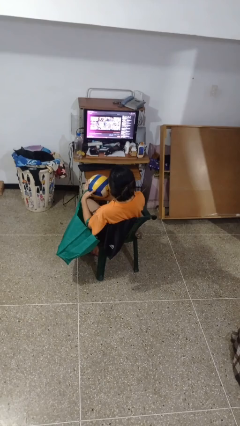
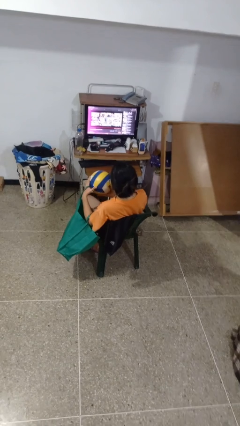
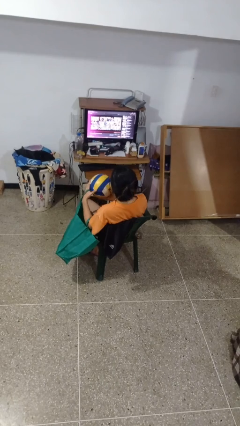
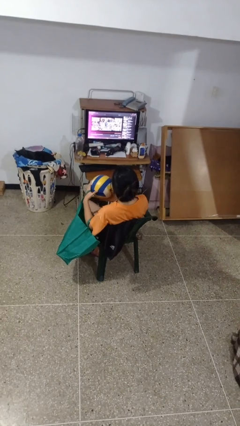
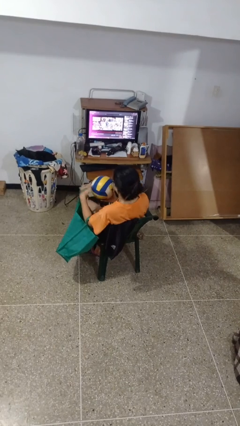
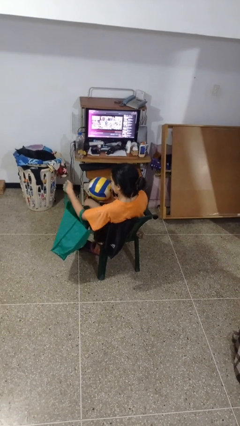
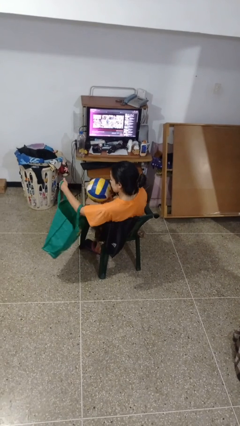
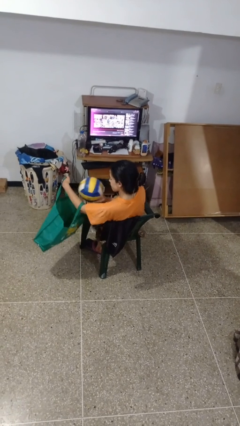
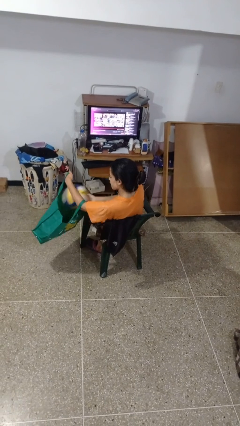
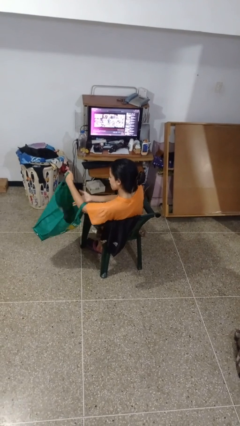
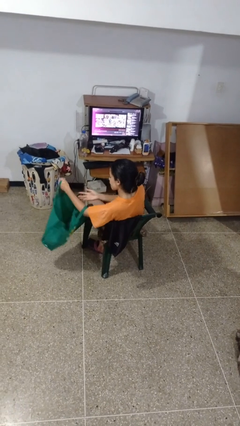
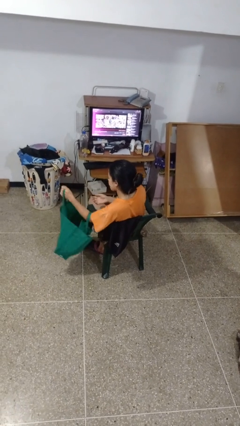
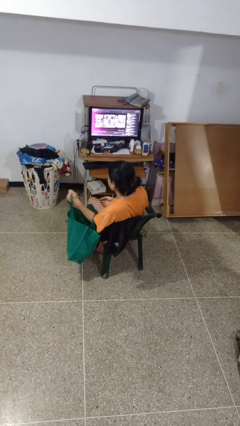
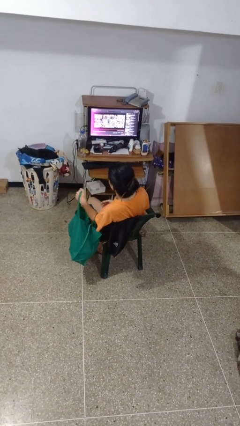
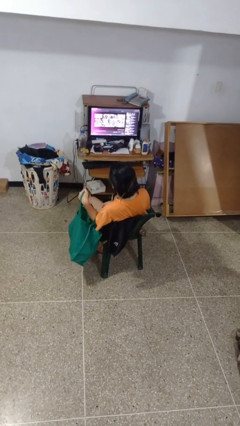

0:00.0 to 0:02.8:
person puts object into bag

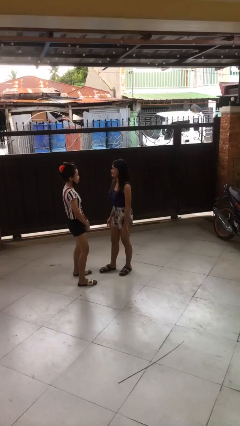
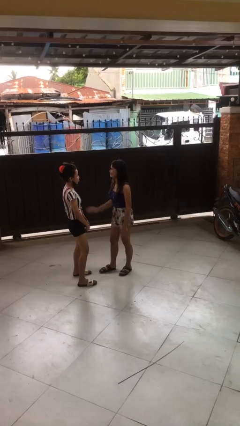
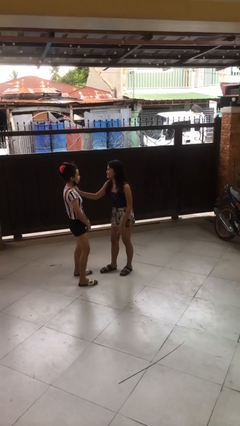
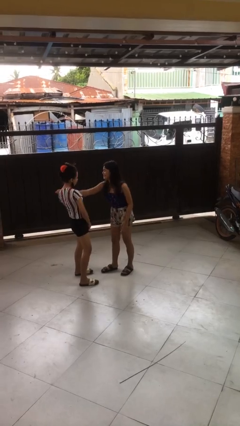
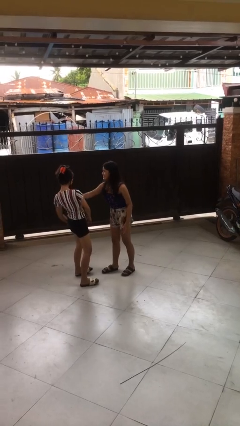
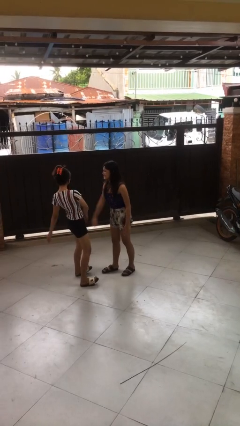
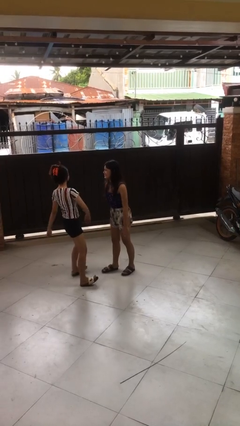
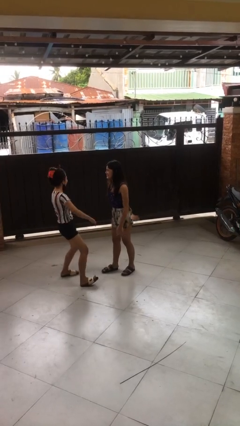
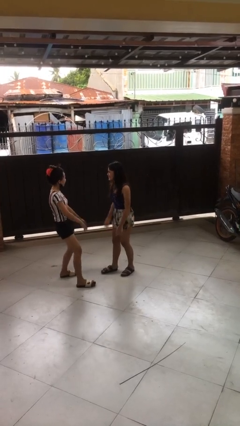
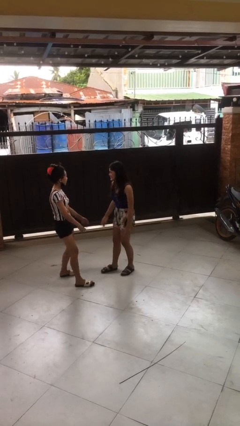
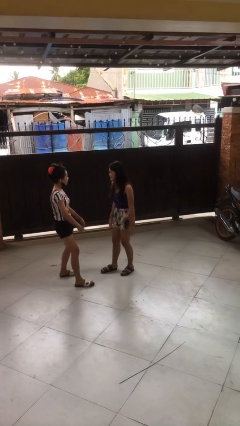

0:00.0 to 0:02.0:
person shoves person

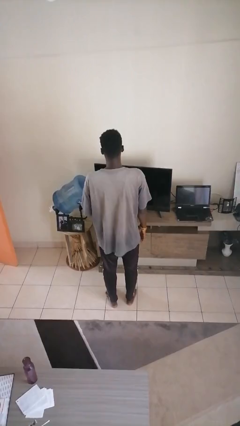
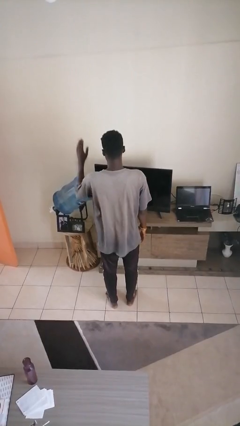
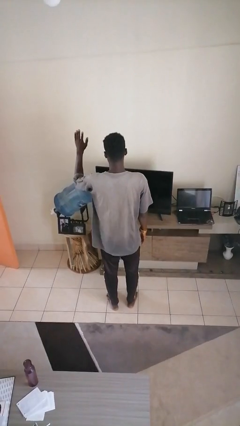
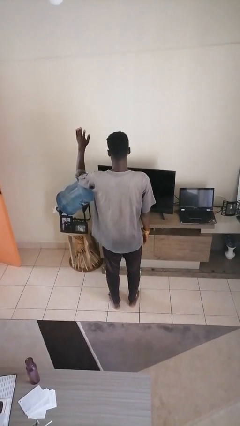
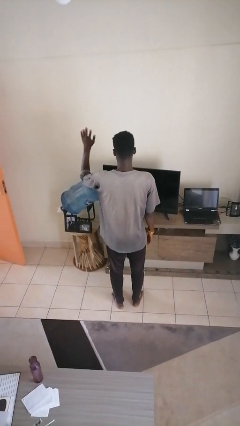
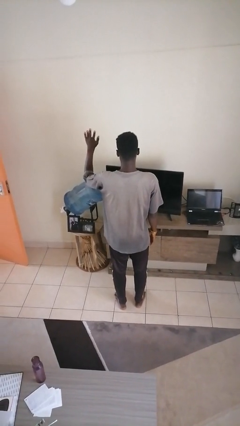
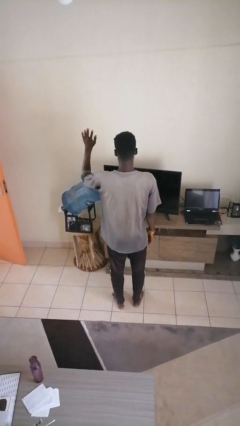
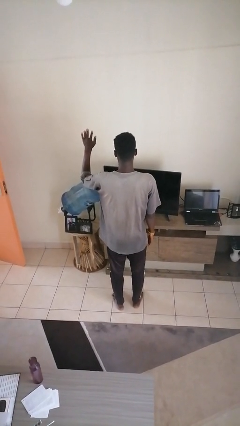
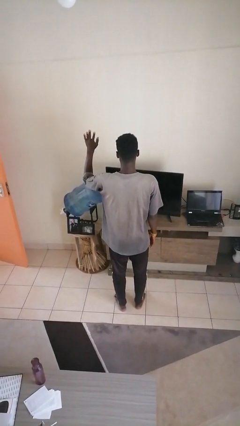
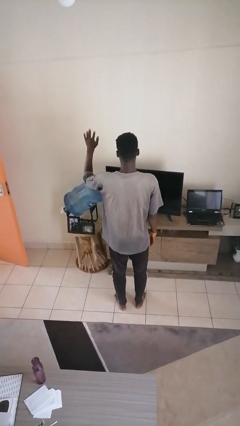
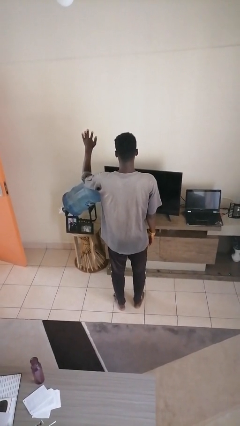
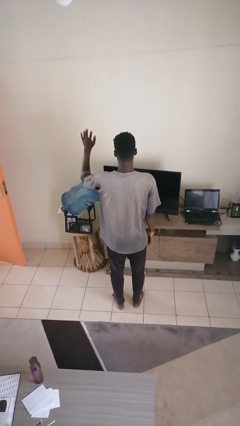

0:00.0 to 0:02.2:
person gestures raise hand

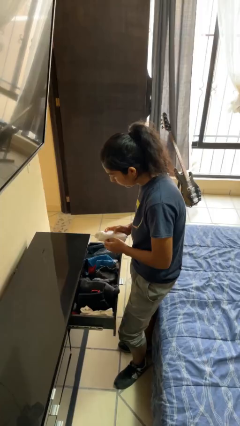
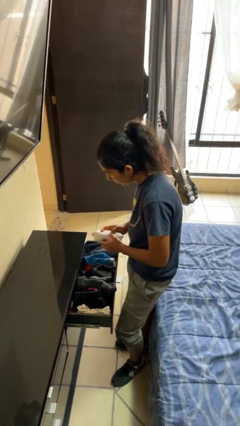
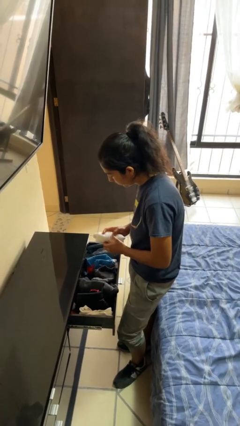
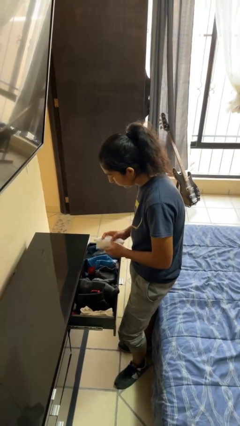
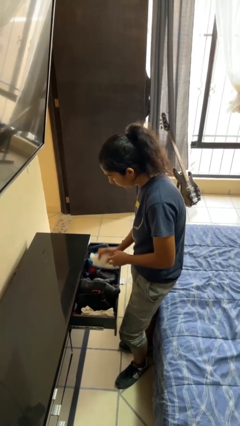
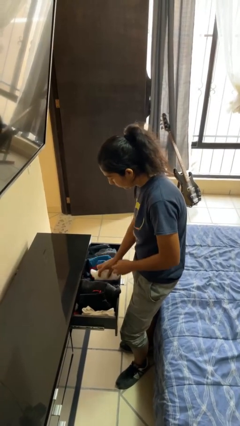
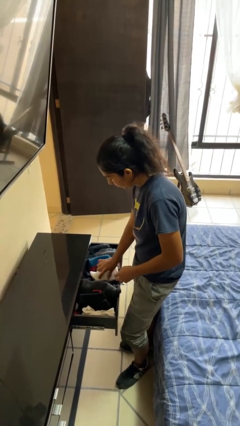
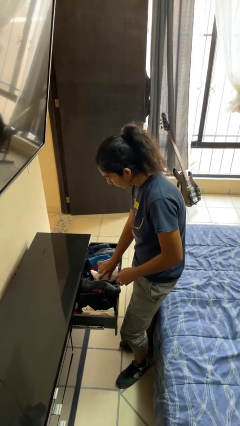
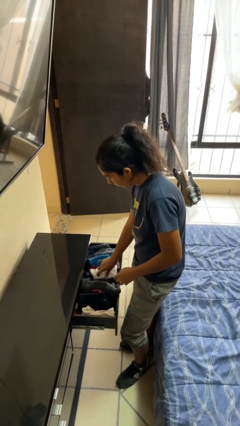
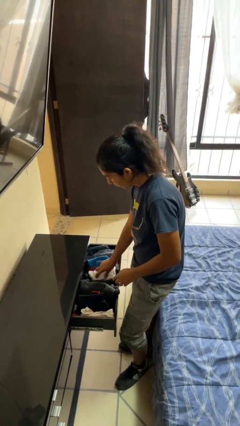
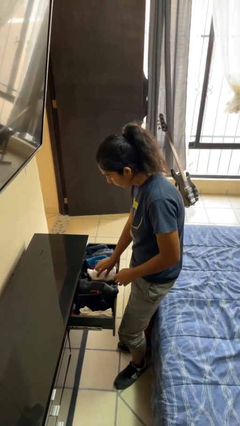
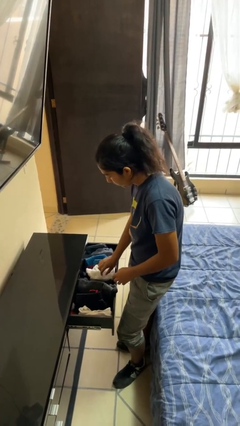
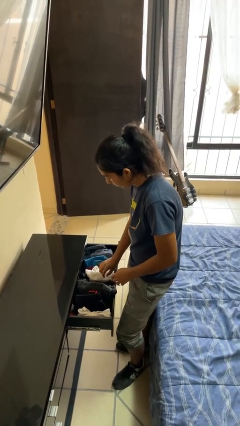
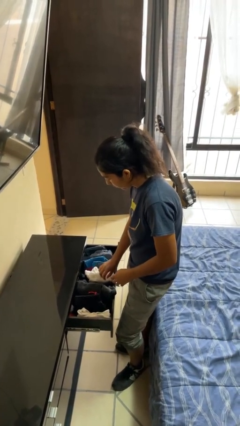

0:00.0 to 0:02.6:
person puts clothes into dresser

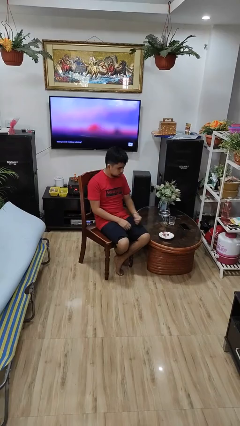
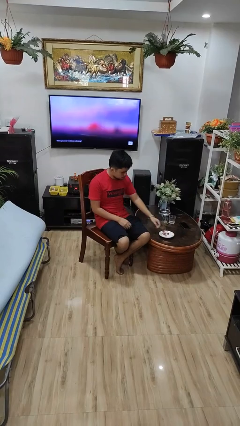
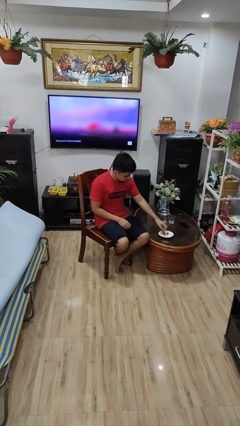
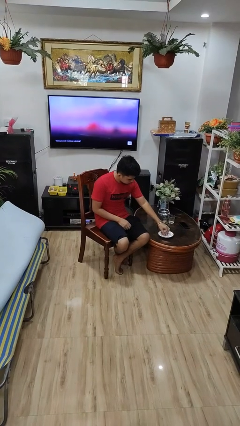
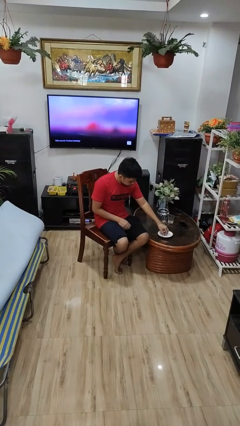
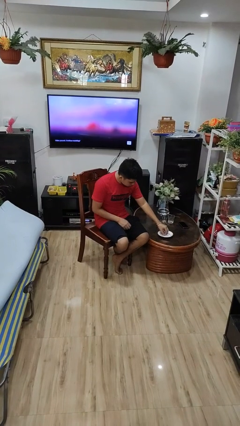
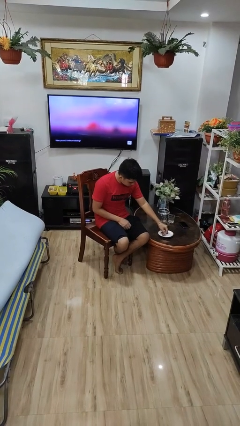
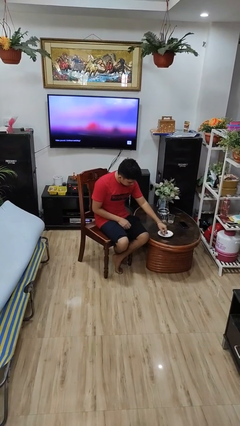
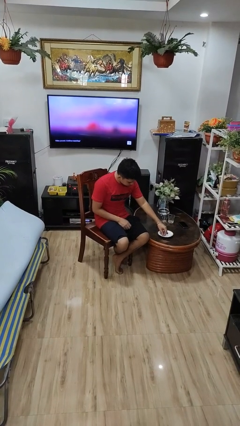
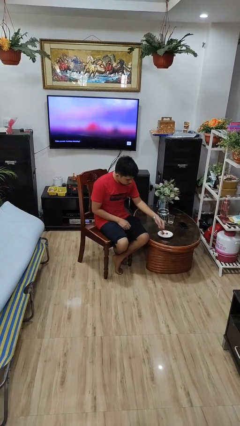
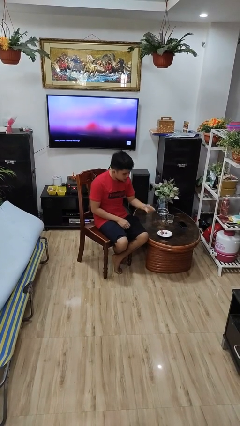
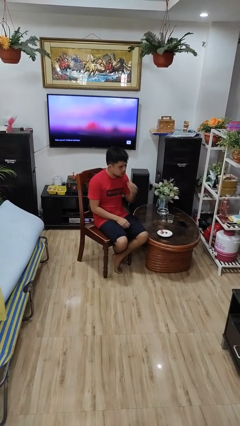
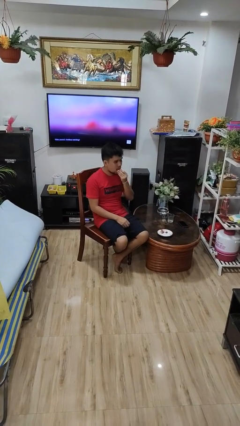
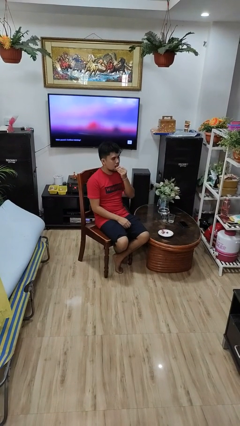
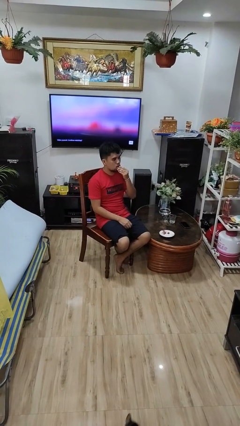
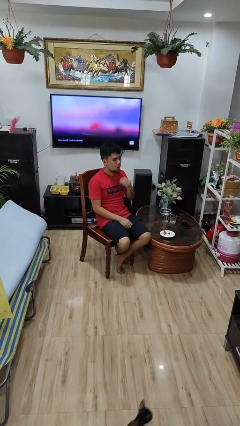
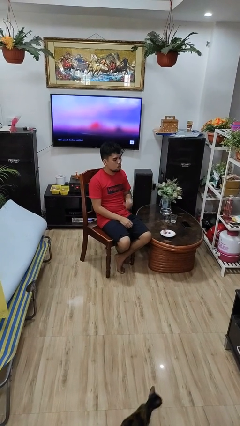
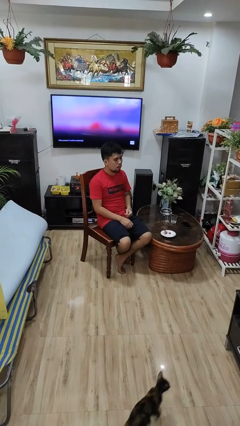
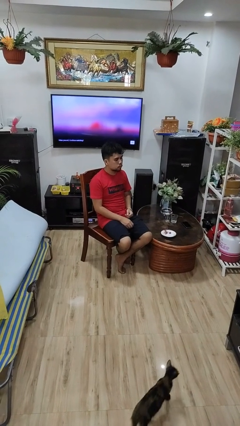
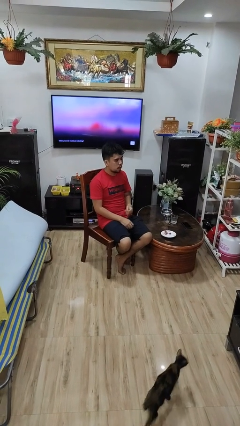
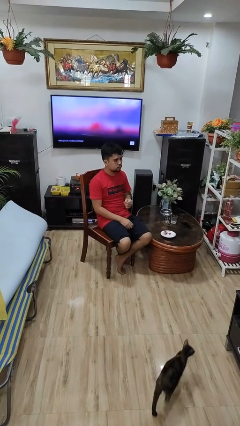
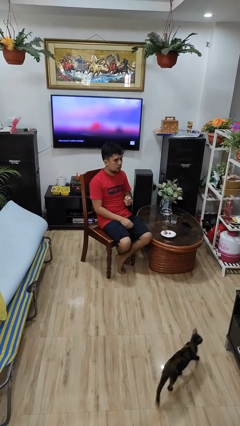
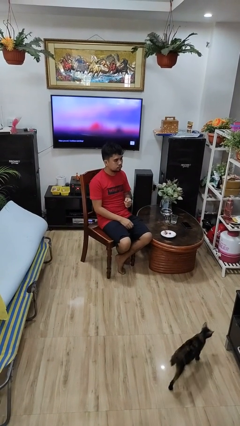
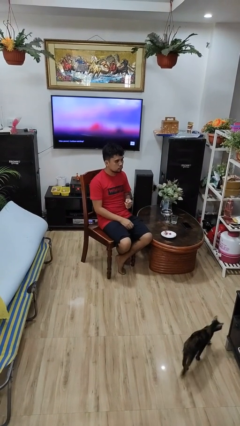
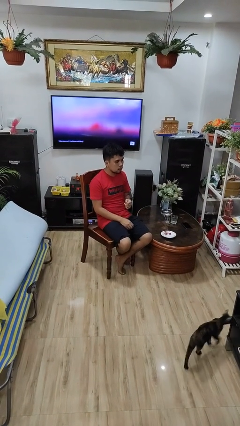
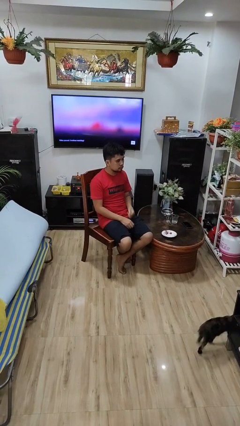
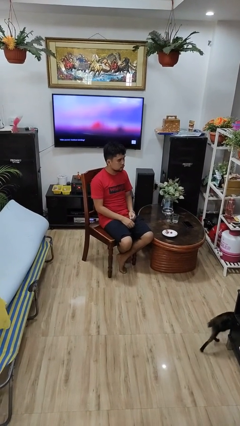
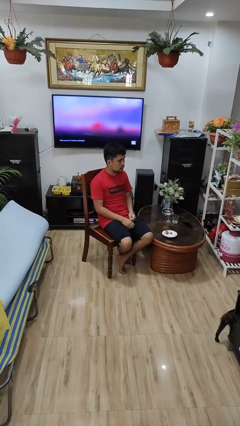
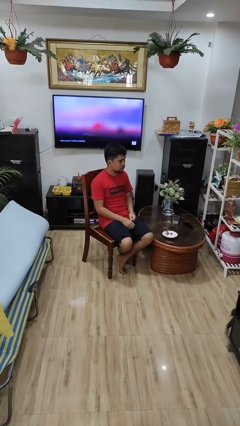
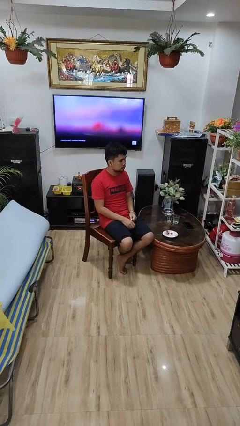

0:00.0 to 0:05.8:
person eats with hands

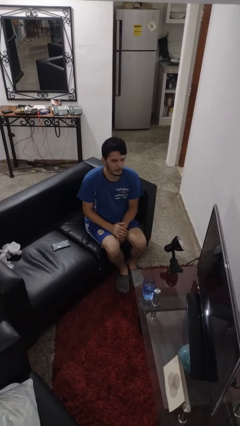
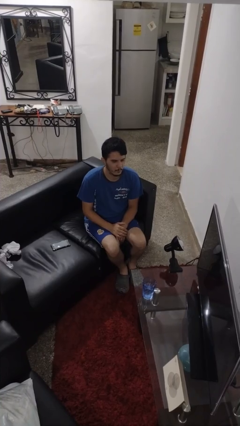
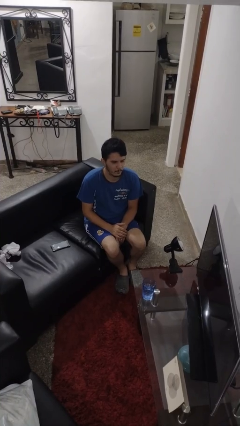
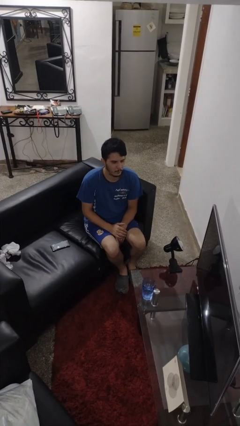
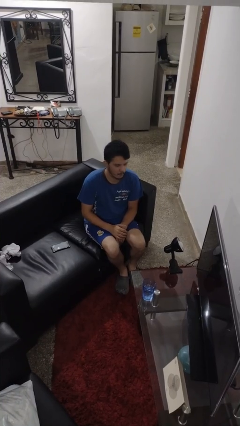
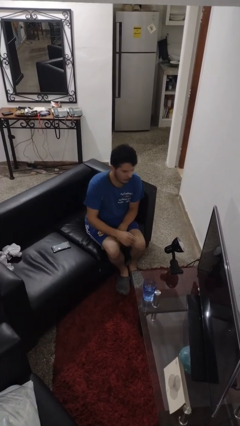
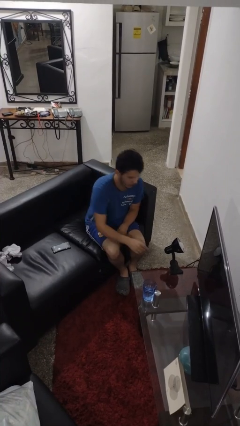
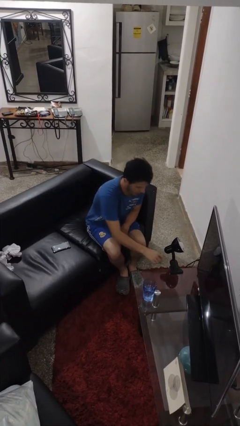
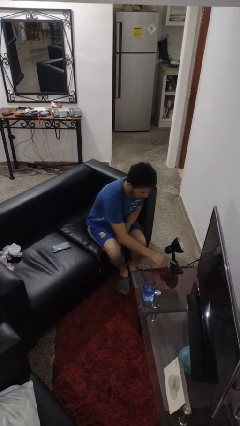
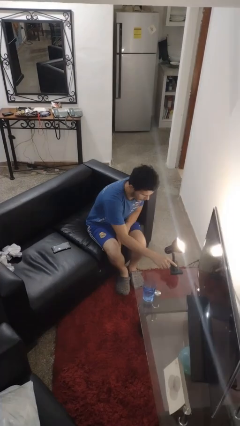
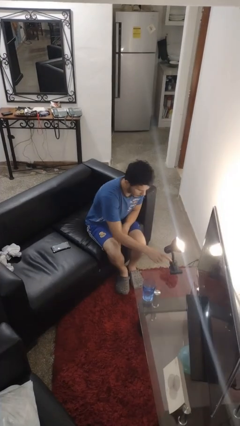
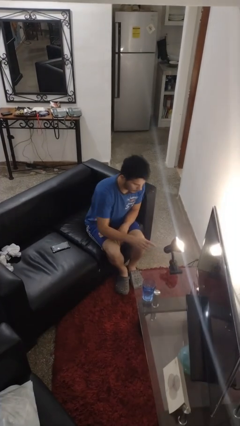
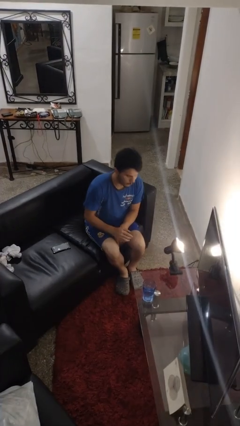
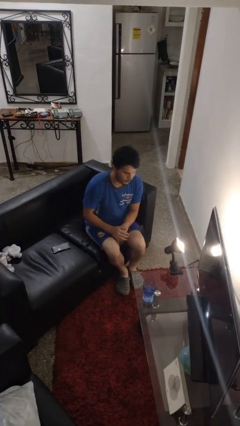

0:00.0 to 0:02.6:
person turns on lamp
